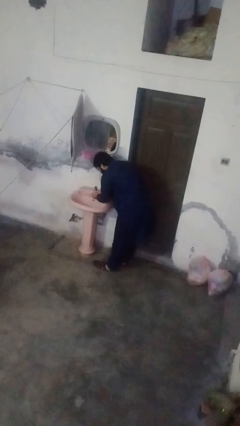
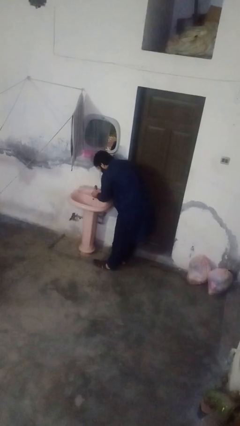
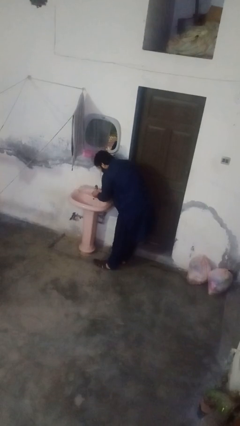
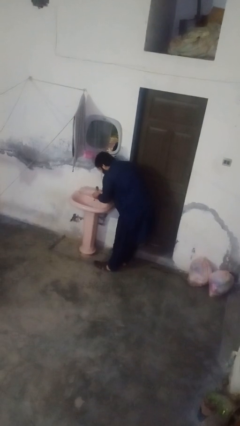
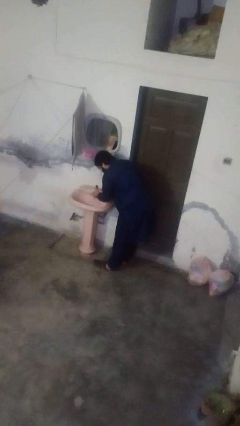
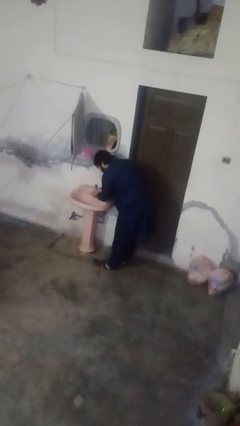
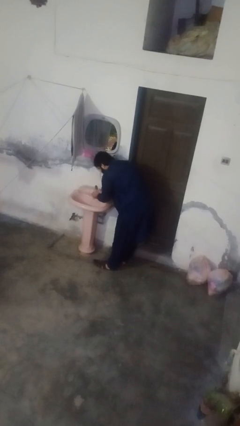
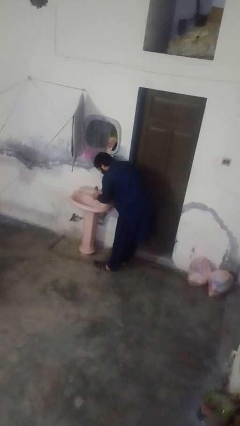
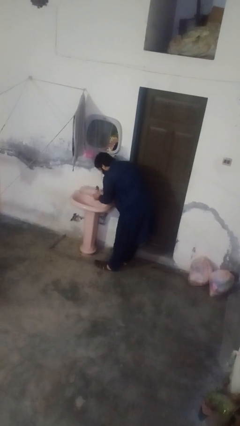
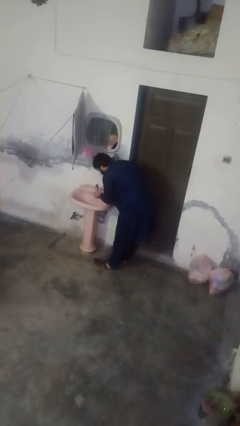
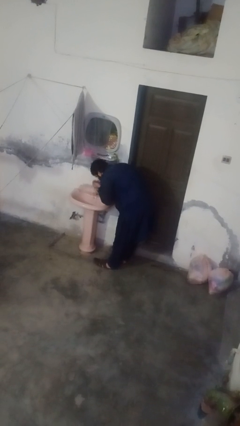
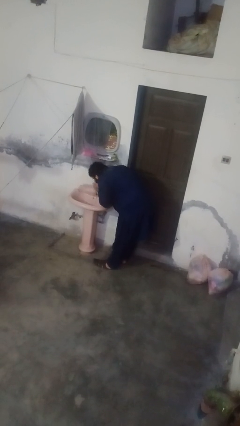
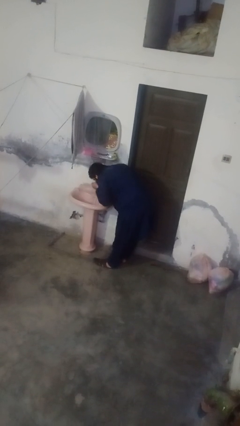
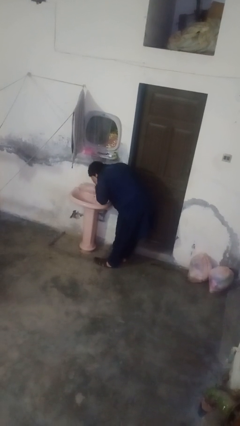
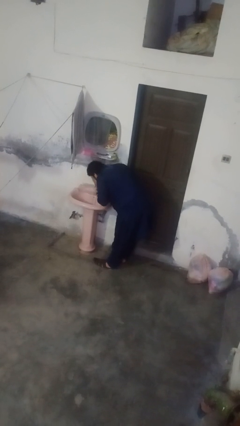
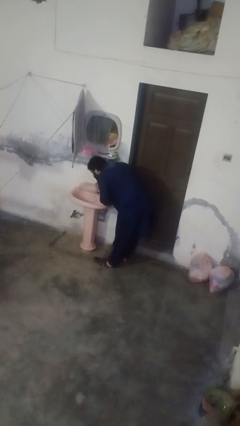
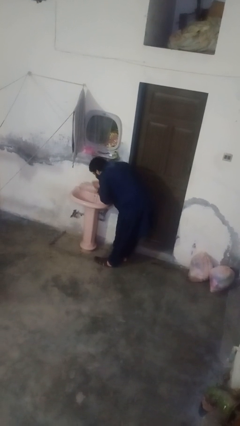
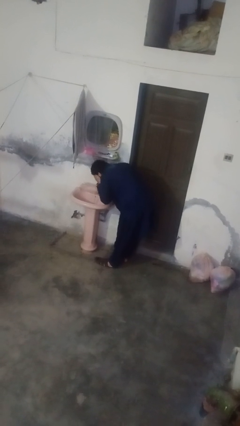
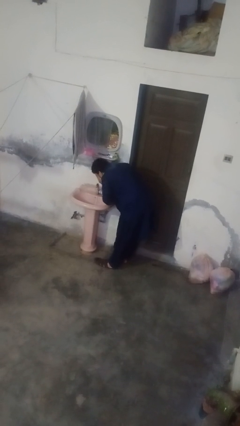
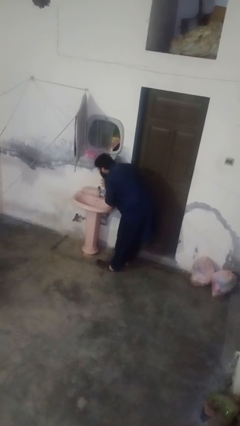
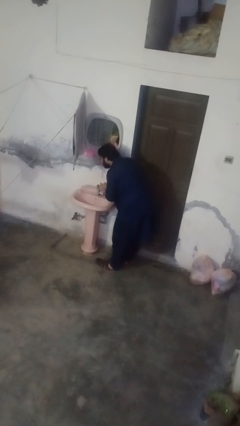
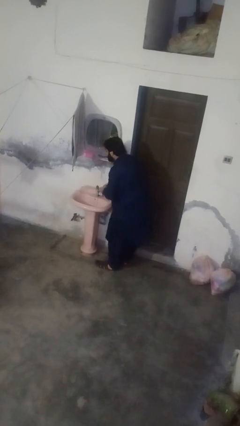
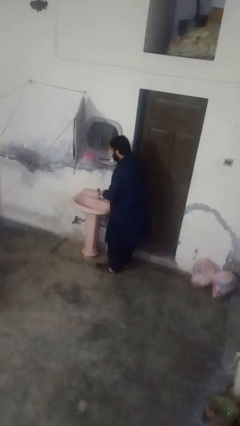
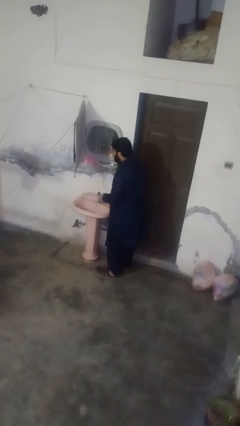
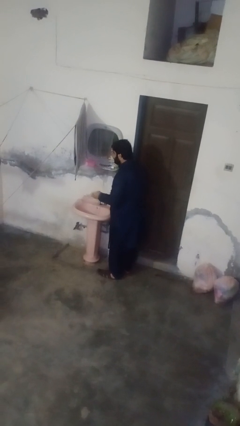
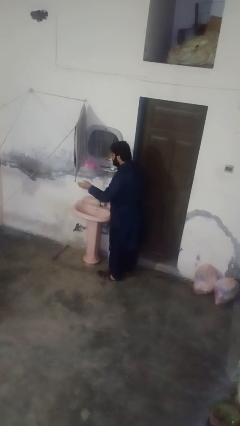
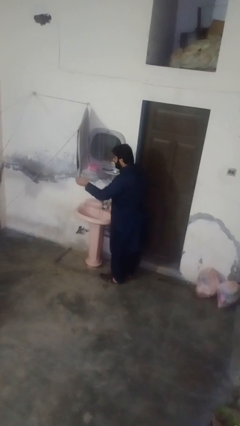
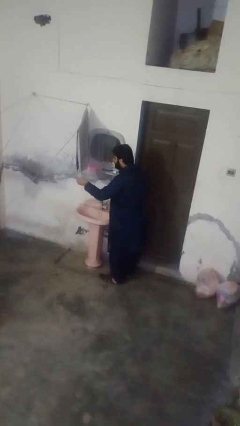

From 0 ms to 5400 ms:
person washes face

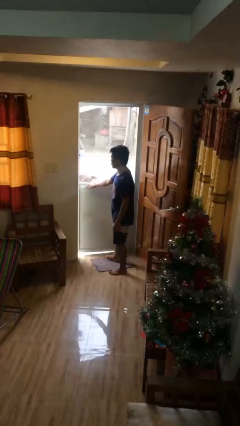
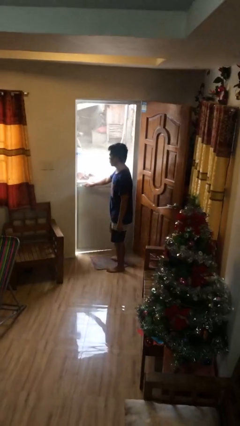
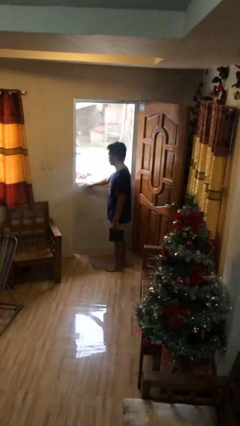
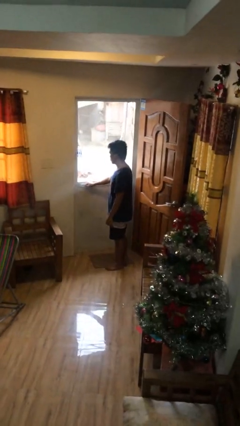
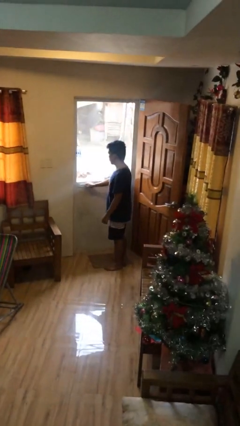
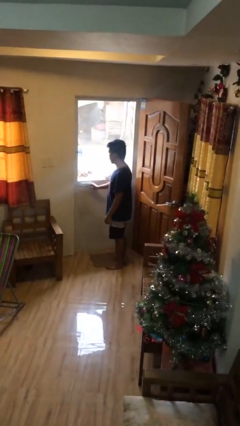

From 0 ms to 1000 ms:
person closes facility door

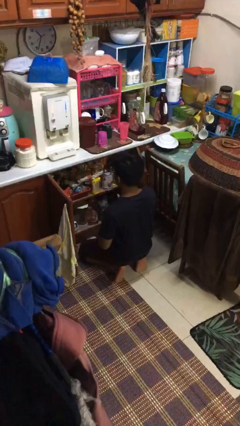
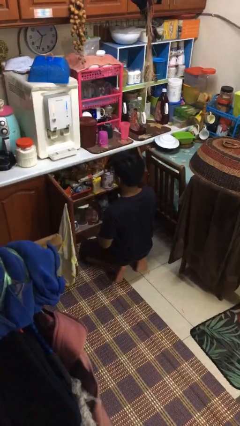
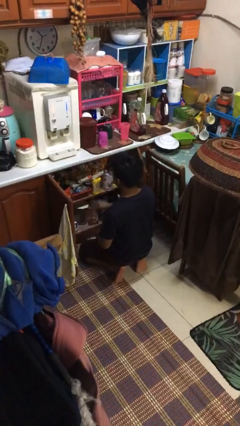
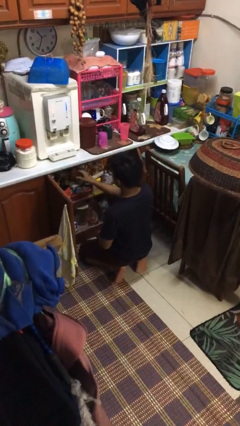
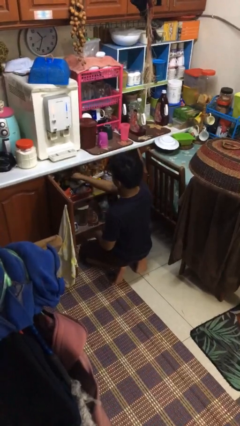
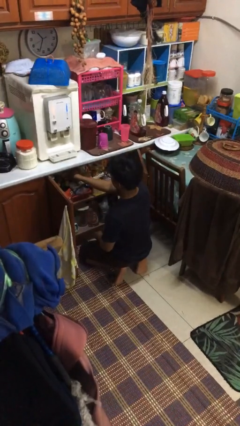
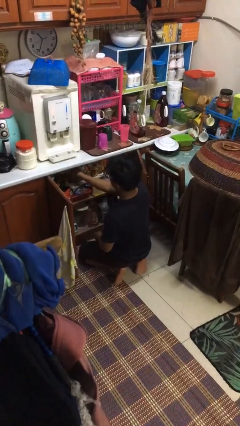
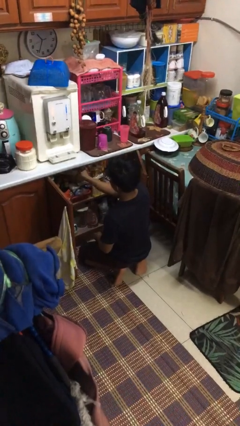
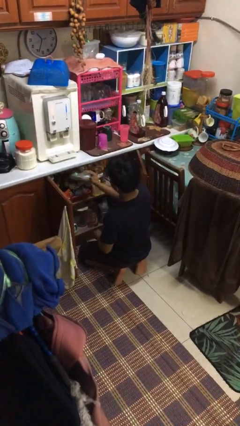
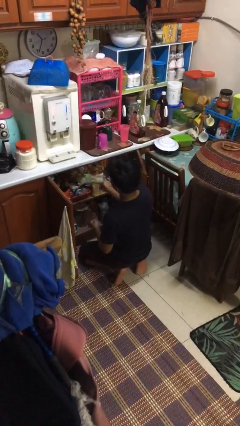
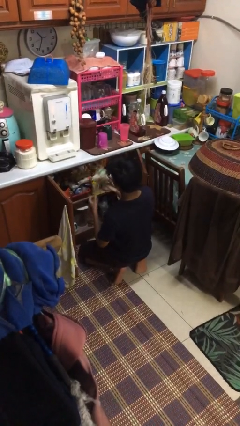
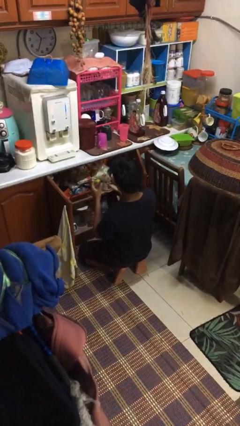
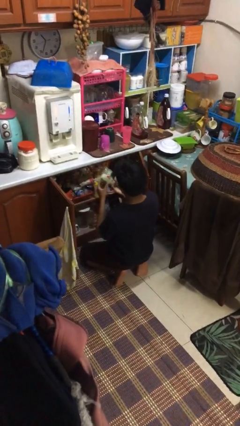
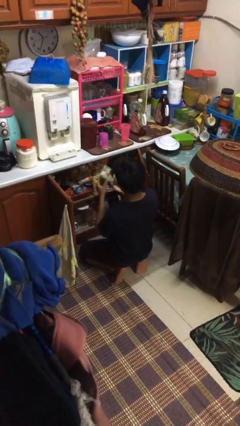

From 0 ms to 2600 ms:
person takes object from cabinet

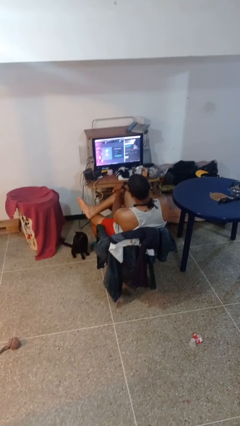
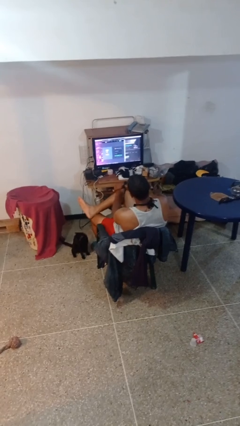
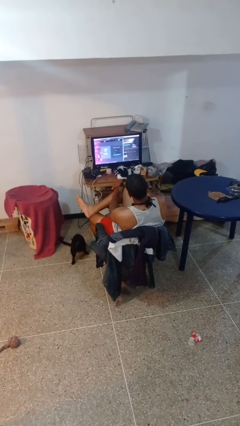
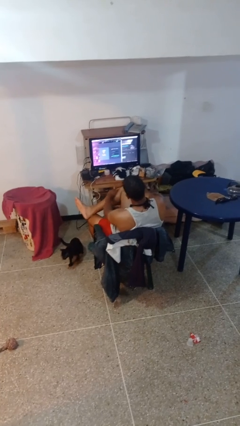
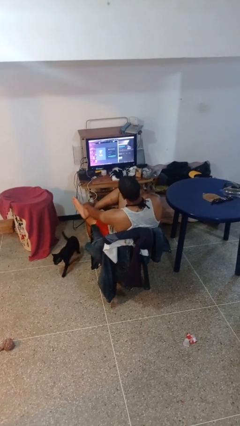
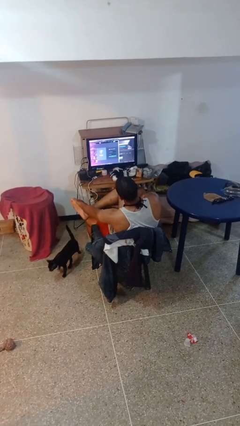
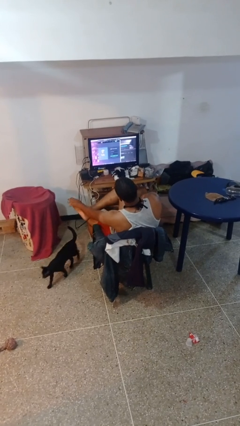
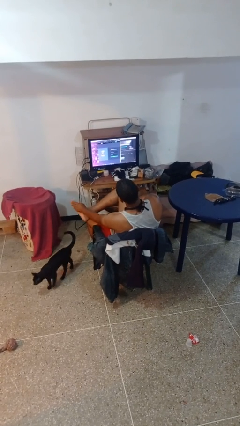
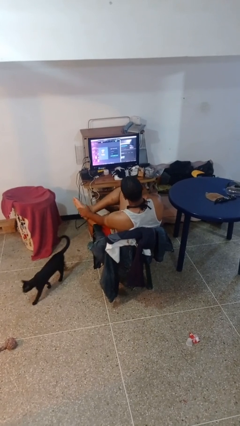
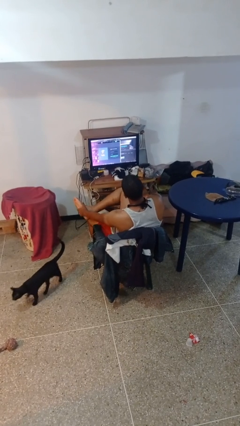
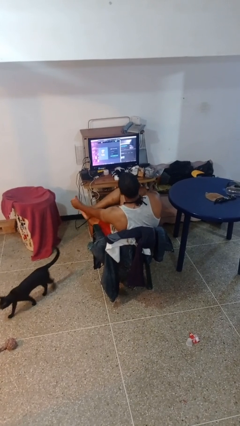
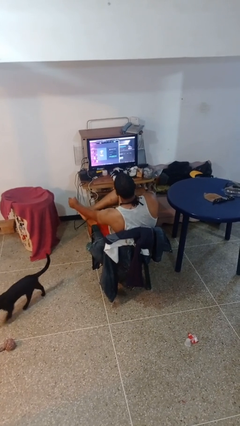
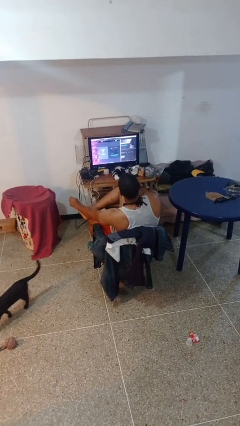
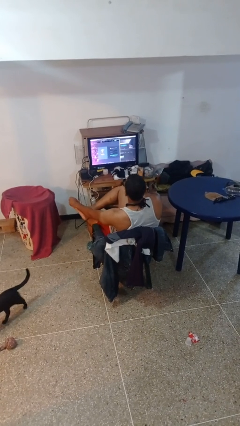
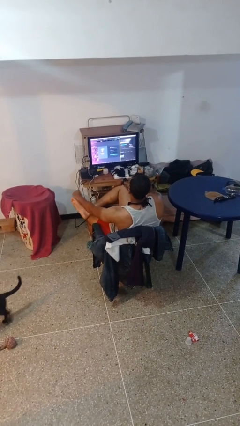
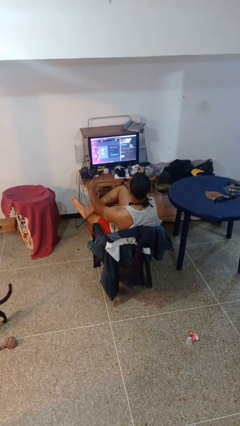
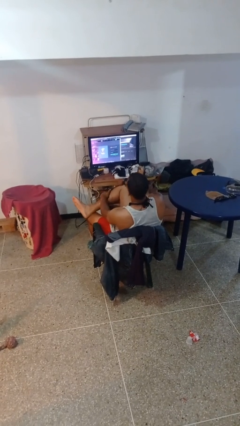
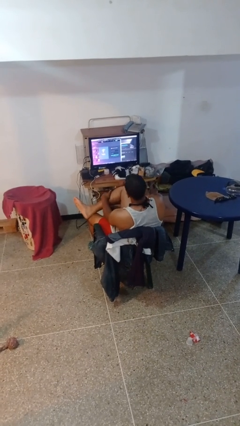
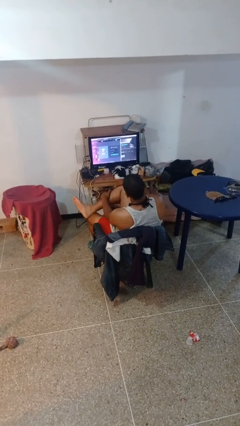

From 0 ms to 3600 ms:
person rubs foot

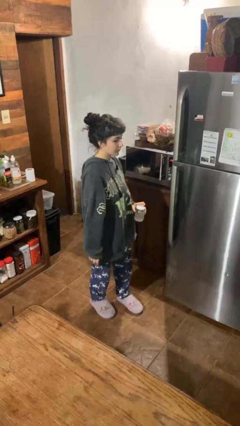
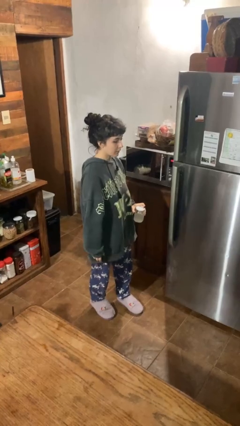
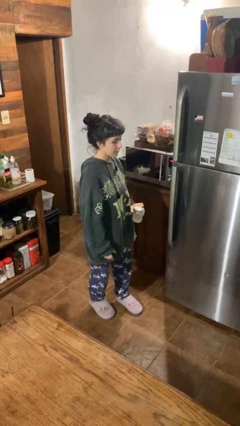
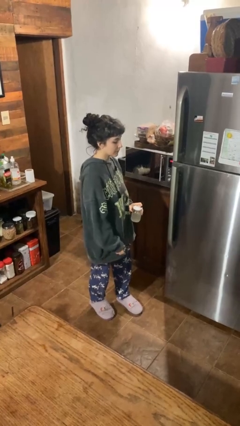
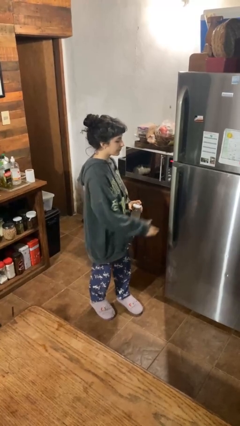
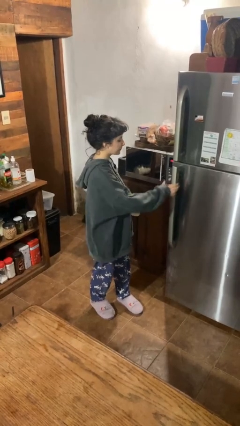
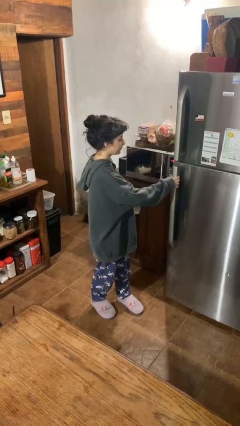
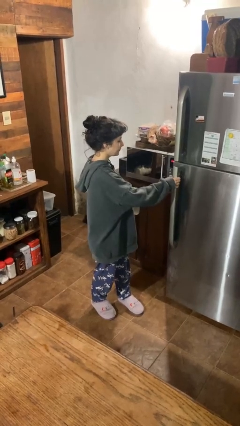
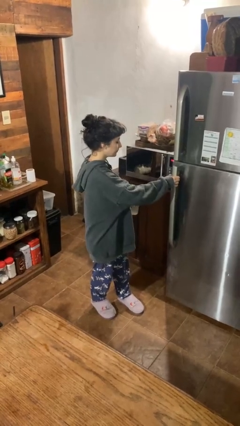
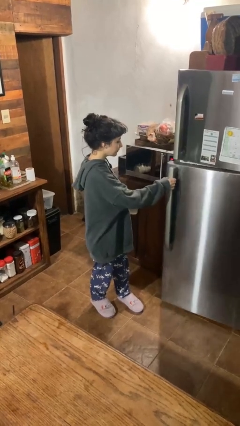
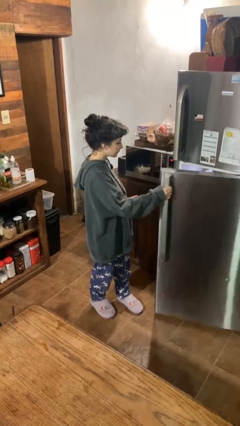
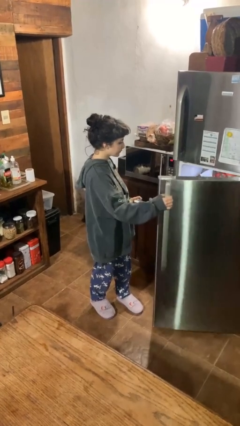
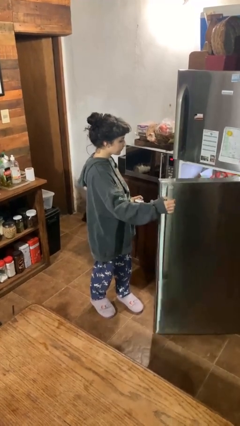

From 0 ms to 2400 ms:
person opens refrigerator

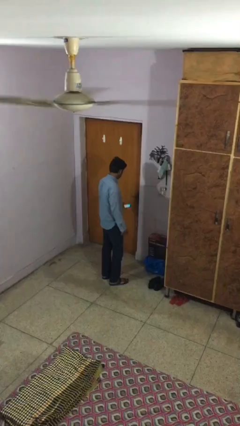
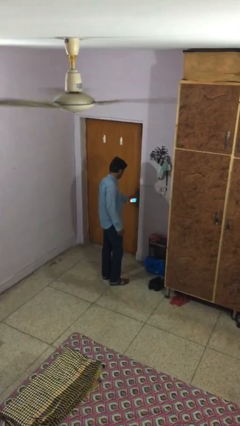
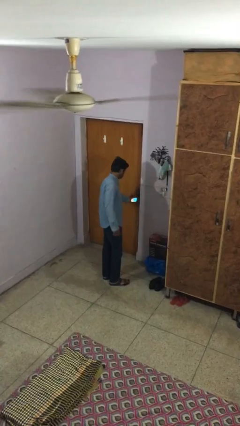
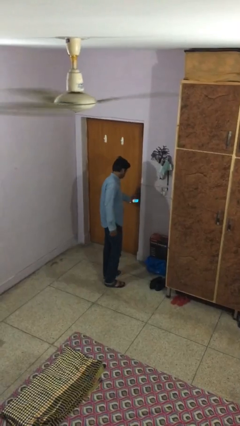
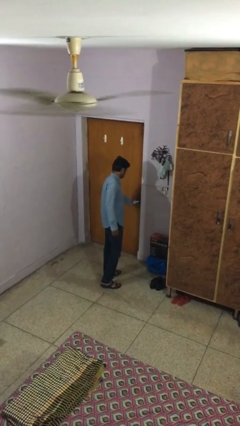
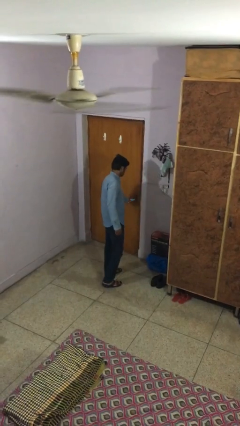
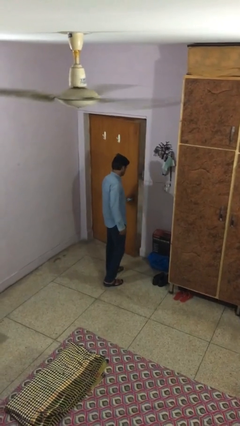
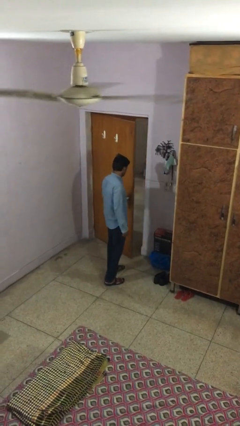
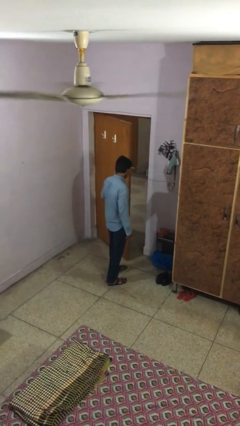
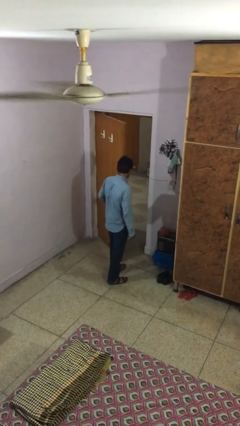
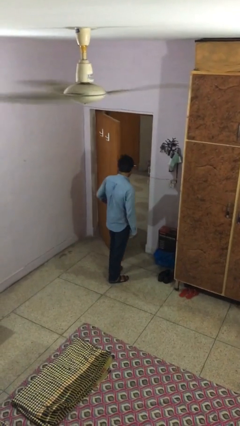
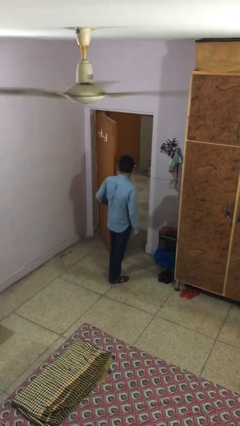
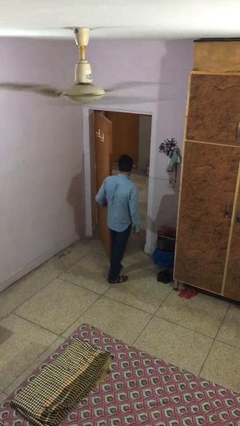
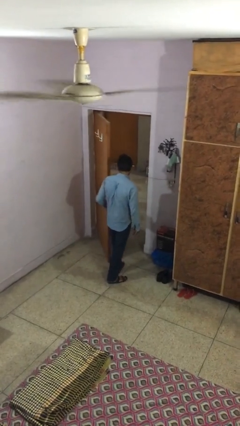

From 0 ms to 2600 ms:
person opens facility door
